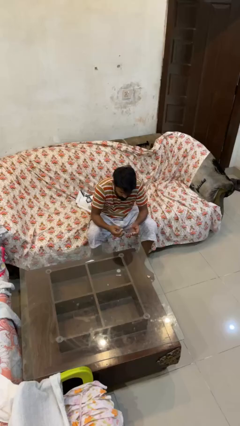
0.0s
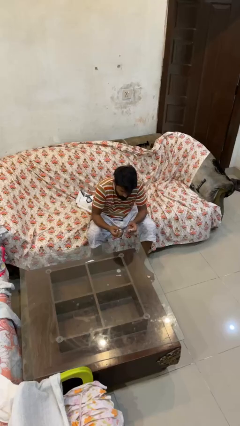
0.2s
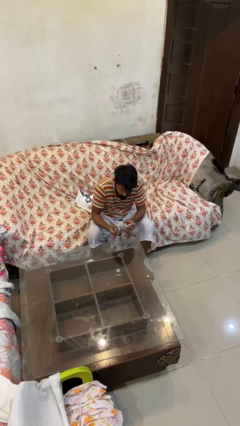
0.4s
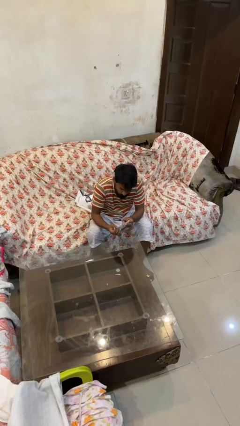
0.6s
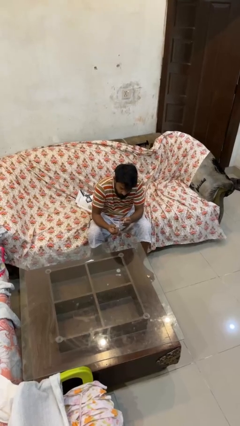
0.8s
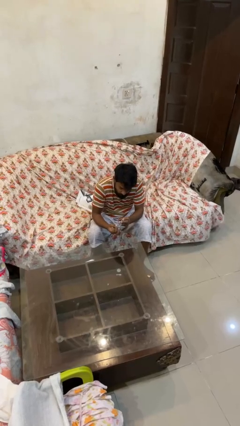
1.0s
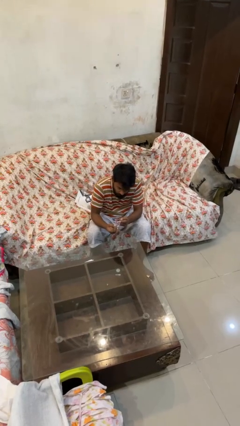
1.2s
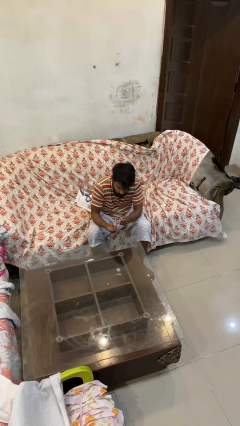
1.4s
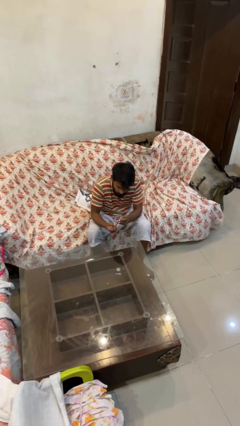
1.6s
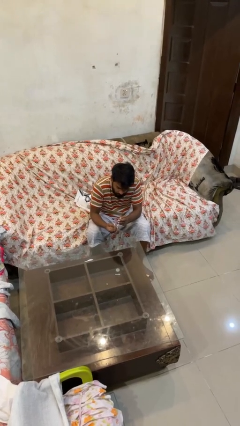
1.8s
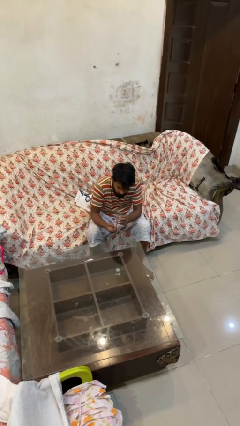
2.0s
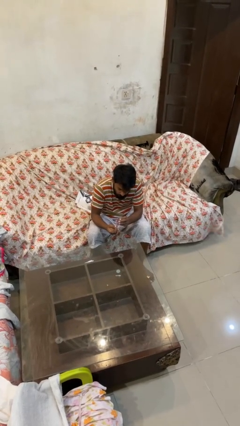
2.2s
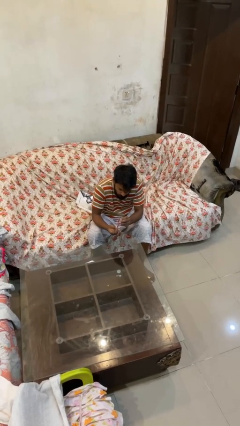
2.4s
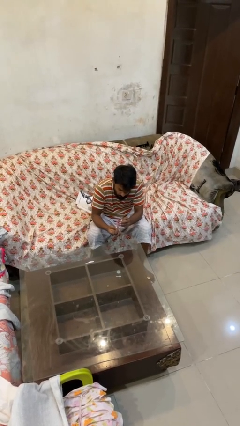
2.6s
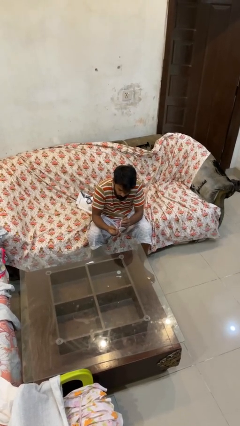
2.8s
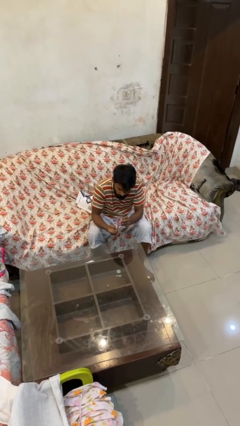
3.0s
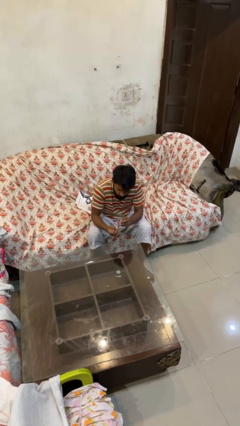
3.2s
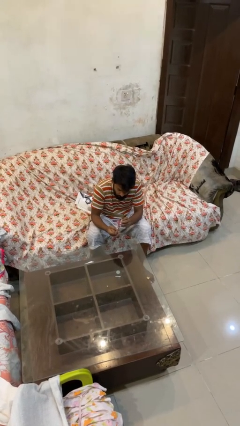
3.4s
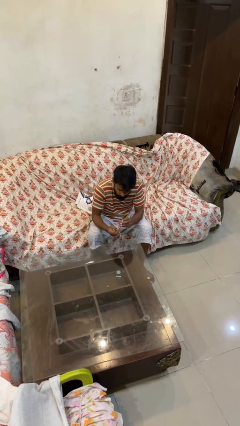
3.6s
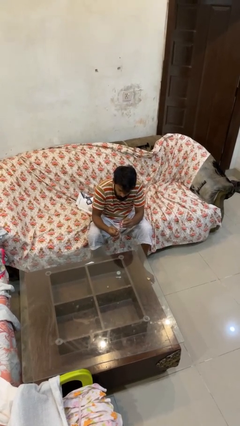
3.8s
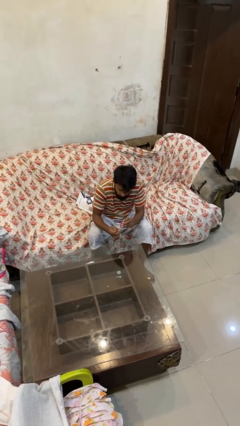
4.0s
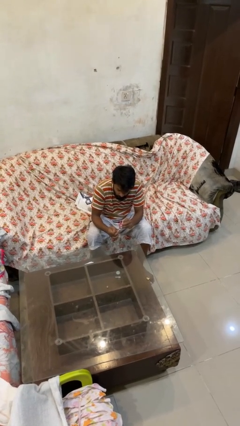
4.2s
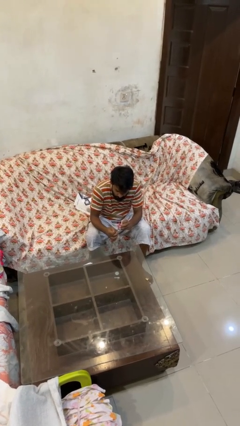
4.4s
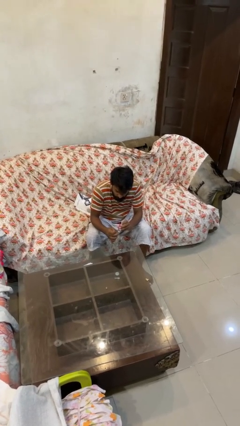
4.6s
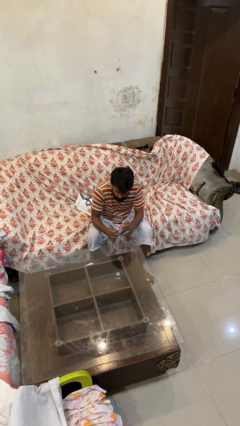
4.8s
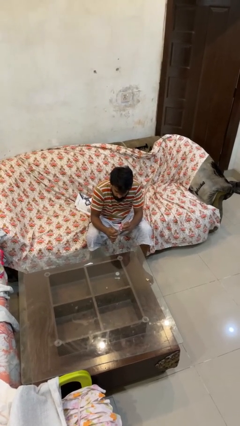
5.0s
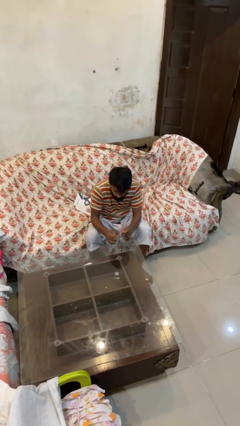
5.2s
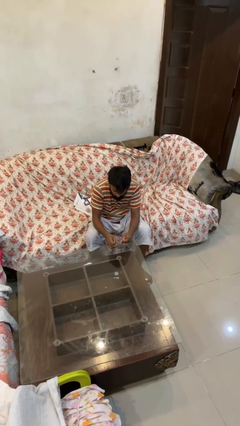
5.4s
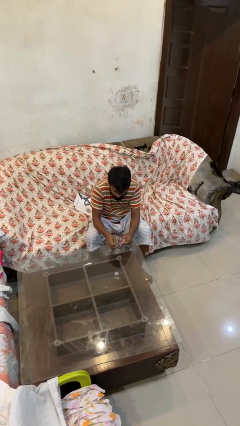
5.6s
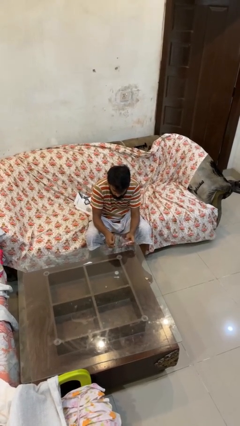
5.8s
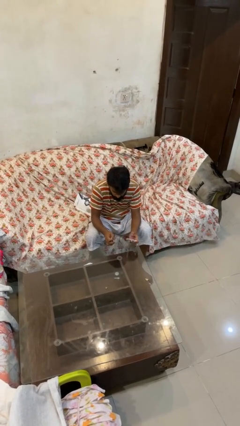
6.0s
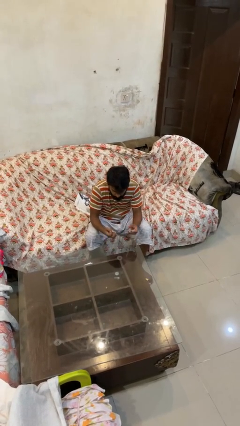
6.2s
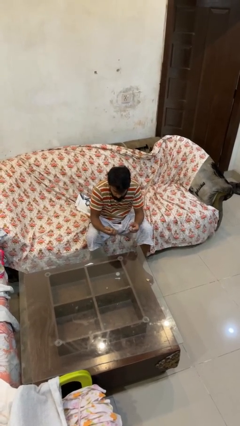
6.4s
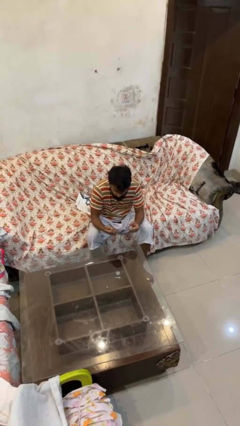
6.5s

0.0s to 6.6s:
person clips fingernails

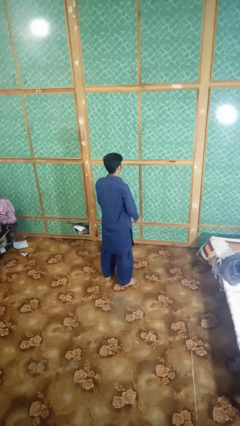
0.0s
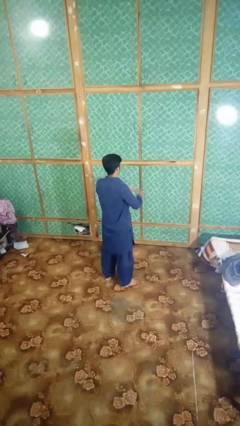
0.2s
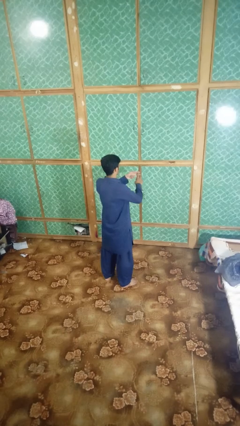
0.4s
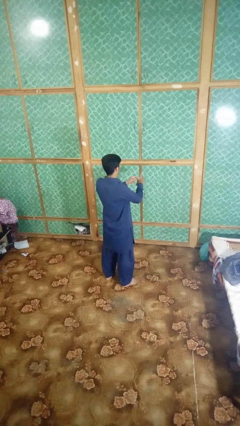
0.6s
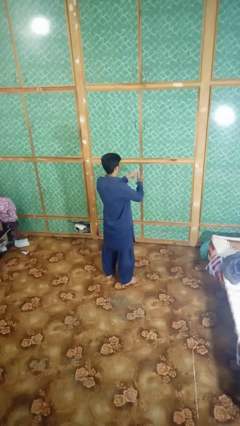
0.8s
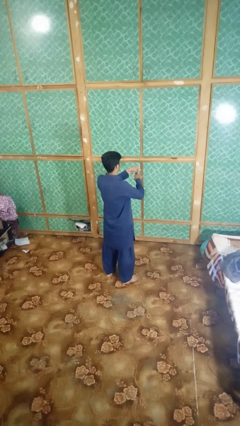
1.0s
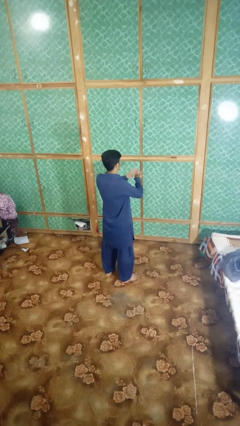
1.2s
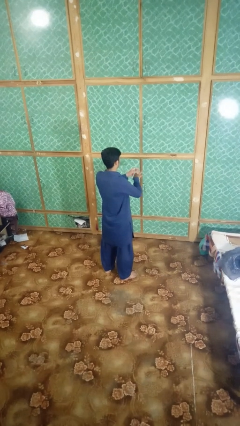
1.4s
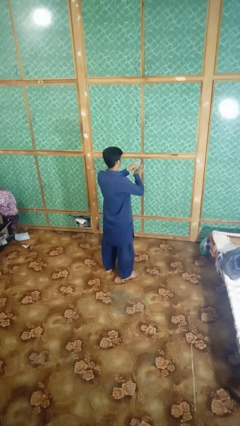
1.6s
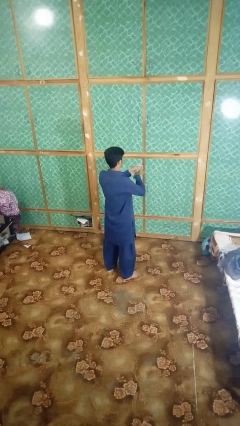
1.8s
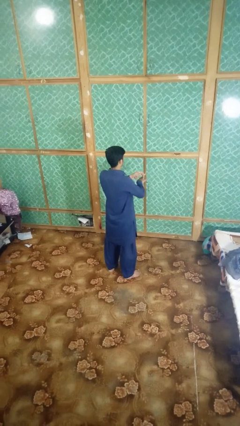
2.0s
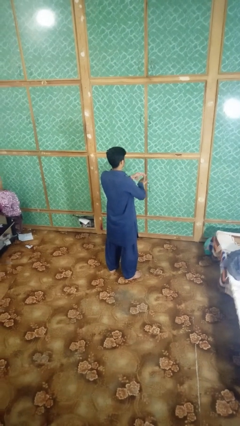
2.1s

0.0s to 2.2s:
person snaps fingers

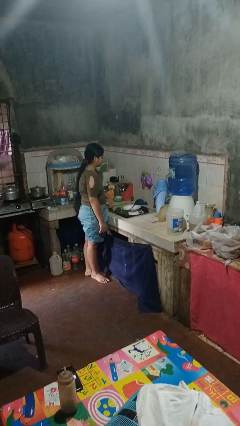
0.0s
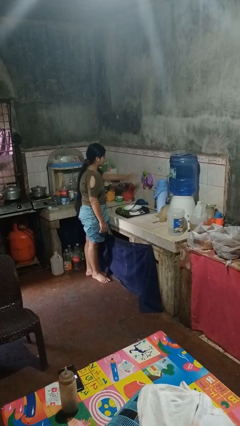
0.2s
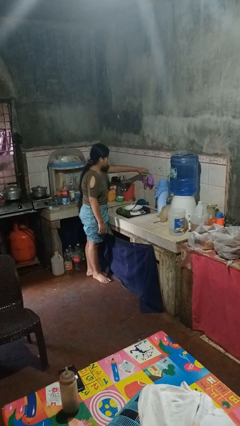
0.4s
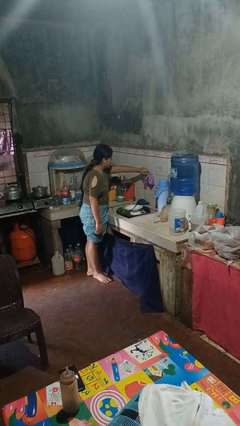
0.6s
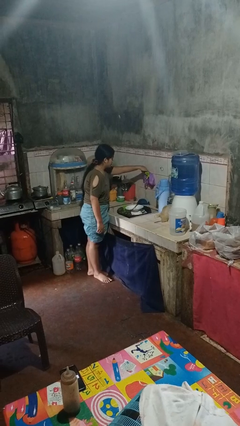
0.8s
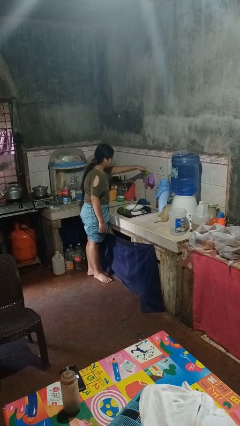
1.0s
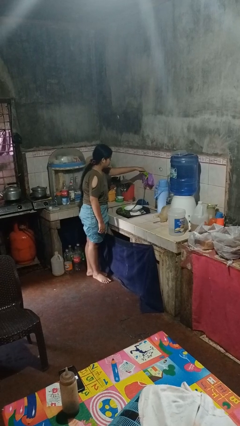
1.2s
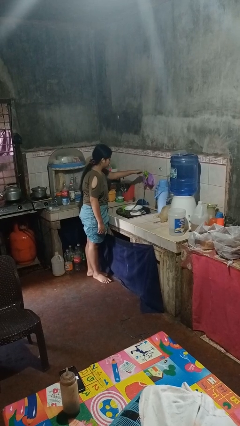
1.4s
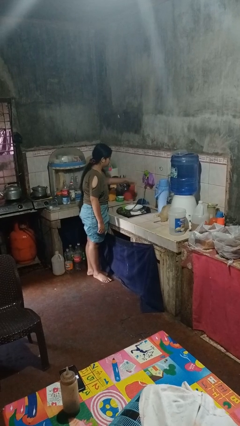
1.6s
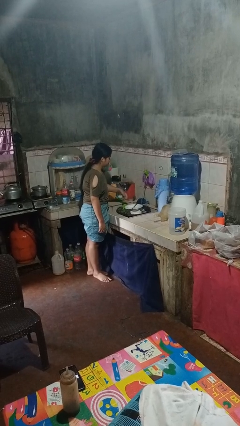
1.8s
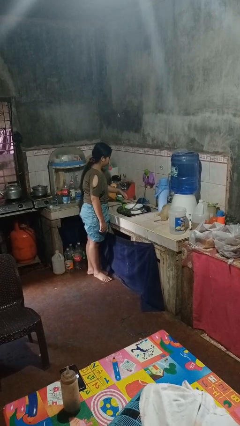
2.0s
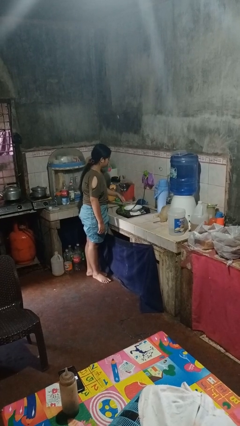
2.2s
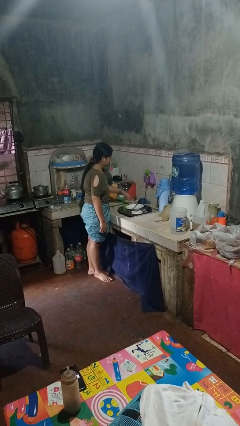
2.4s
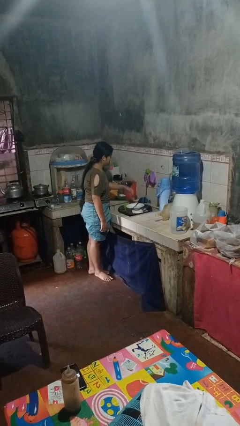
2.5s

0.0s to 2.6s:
person turns on faucet

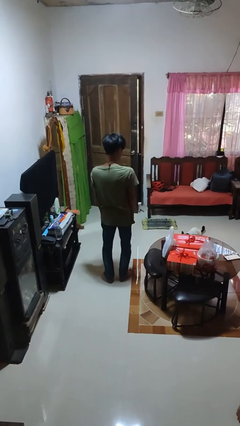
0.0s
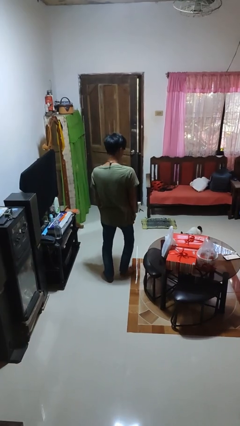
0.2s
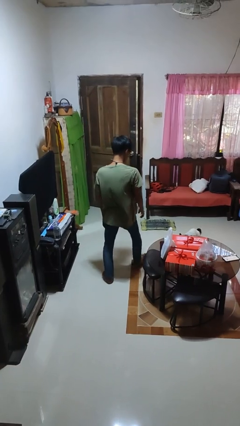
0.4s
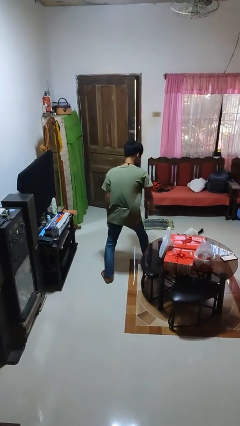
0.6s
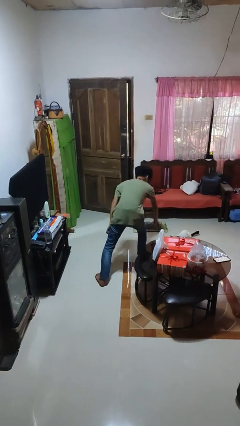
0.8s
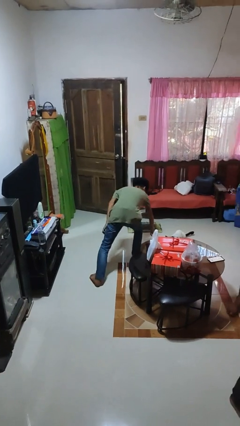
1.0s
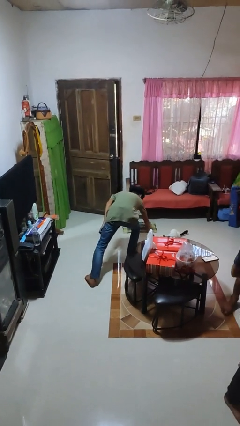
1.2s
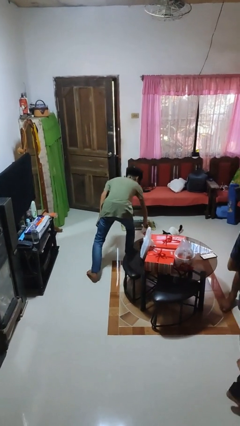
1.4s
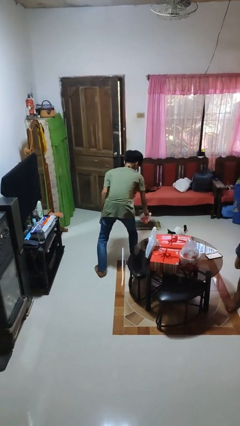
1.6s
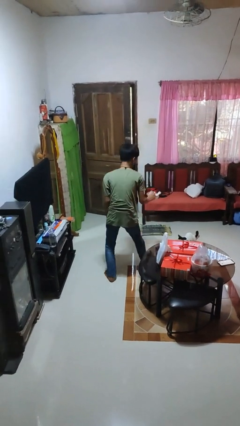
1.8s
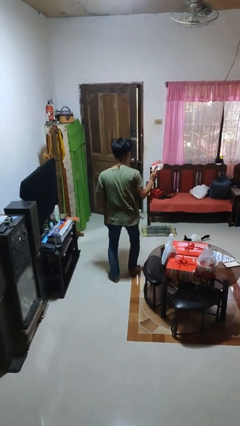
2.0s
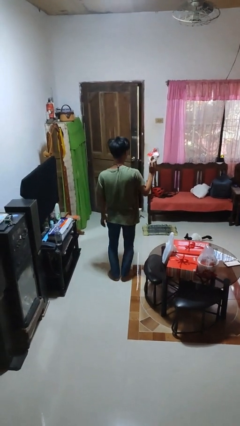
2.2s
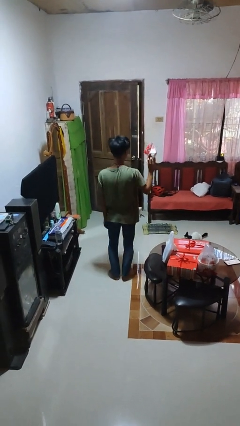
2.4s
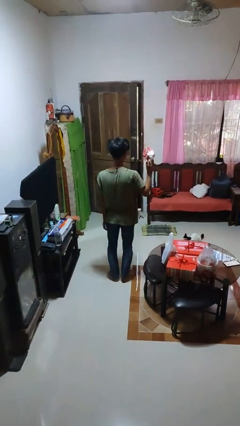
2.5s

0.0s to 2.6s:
person picks up object from floor

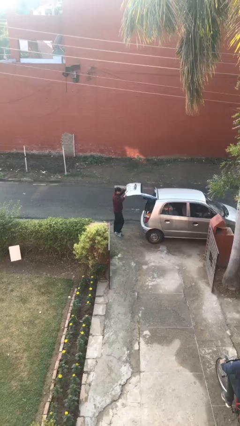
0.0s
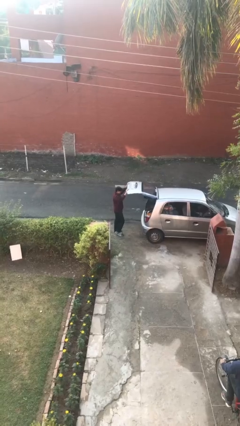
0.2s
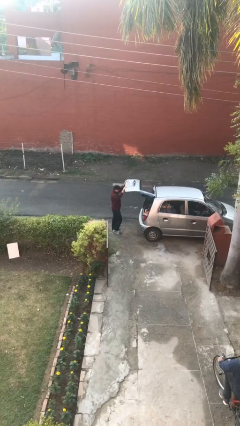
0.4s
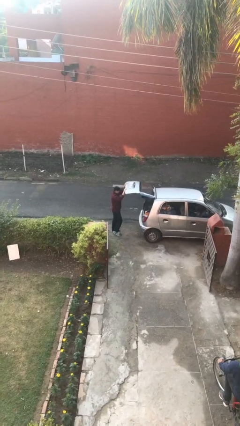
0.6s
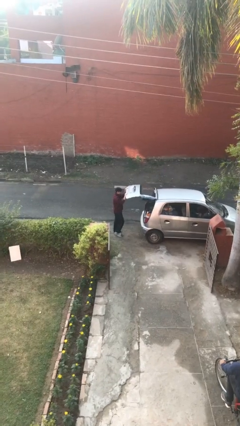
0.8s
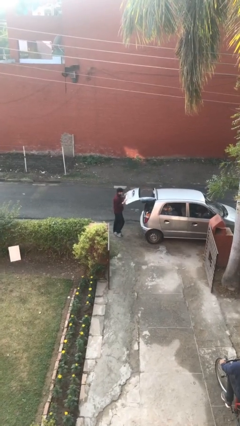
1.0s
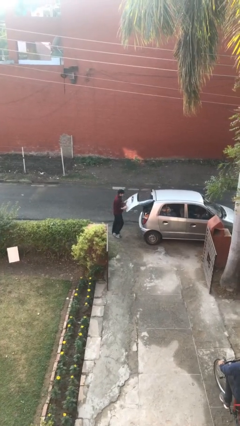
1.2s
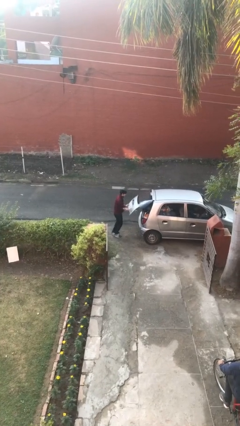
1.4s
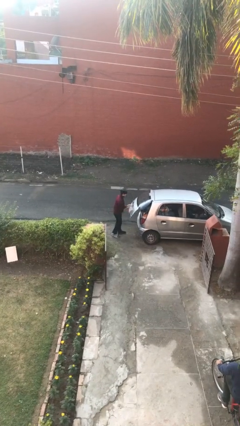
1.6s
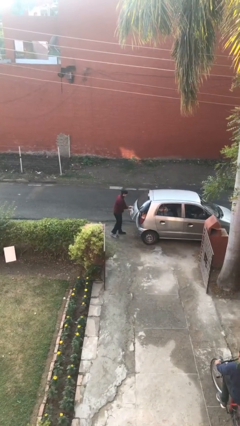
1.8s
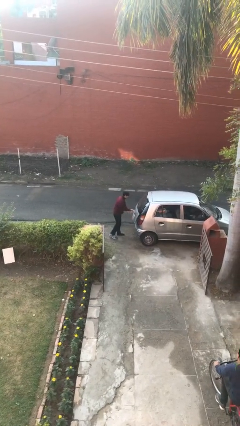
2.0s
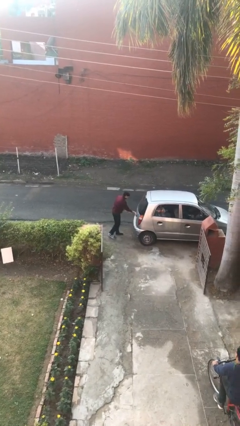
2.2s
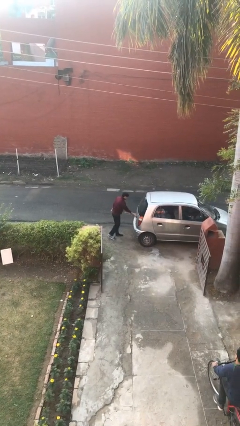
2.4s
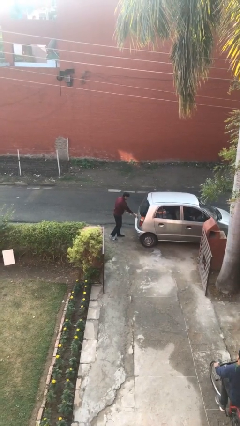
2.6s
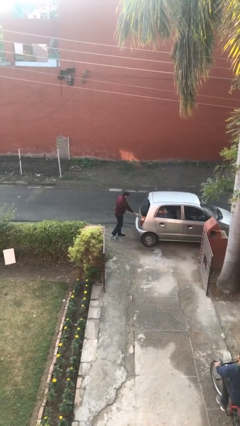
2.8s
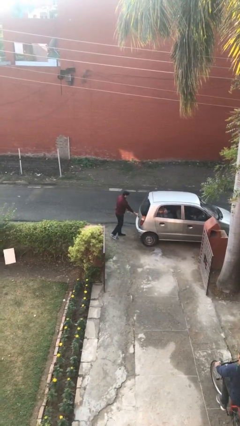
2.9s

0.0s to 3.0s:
person closes car trunk

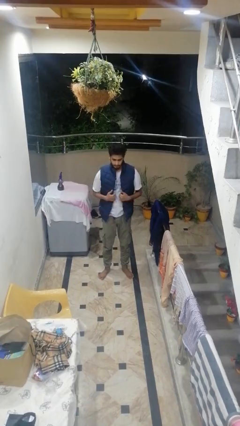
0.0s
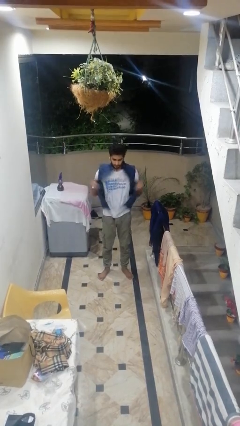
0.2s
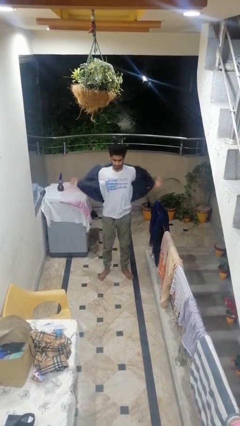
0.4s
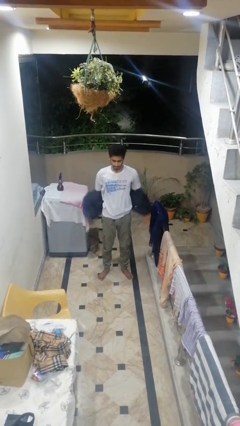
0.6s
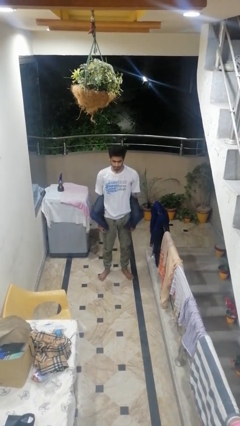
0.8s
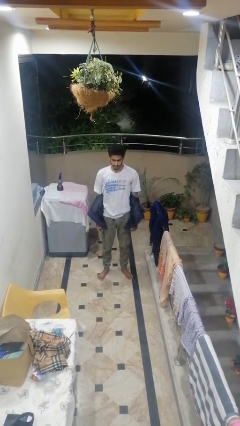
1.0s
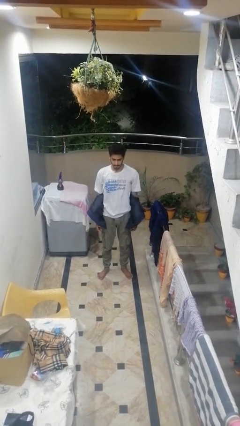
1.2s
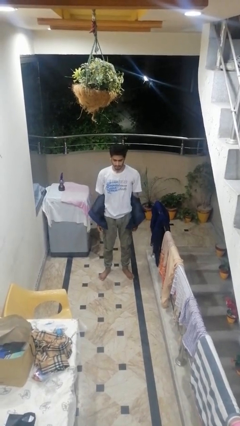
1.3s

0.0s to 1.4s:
person takes off jacket
